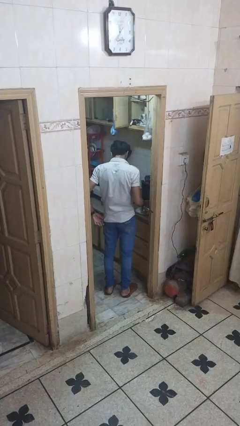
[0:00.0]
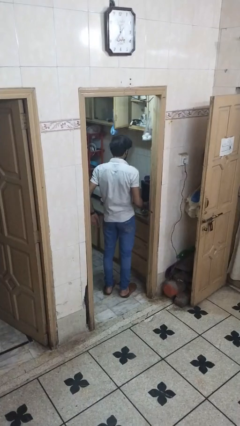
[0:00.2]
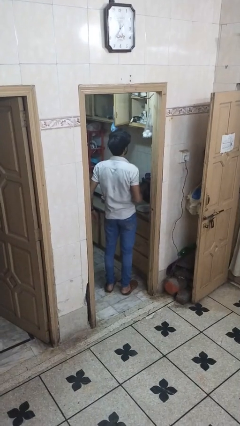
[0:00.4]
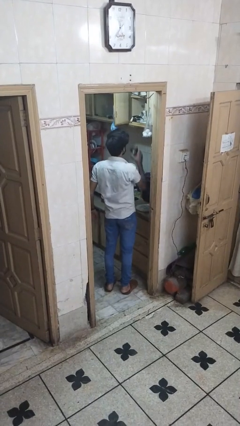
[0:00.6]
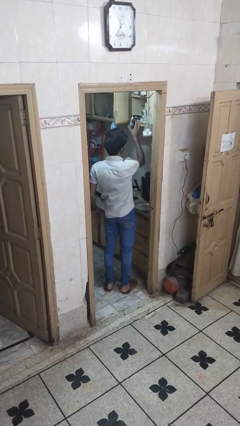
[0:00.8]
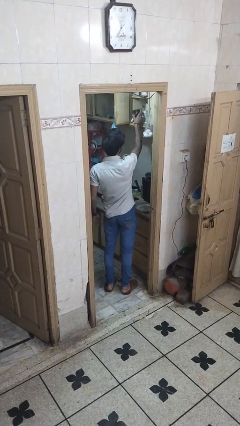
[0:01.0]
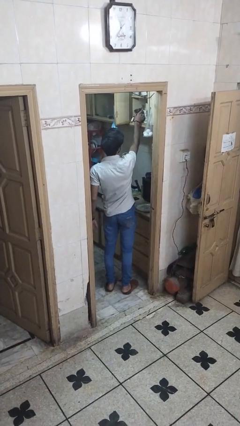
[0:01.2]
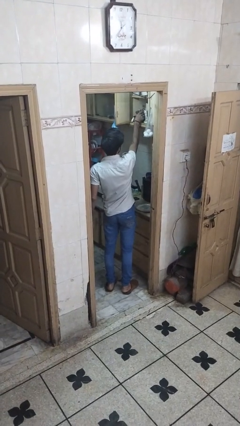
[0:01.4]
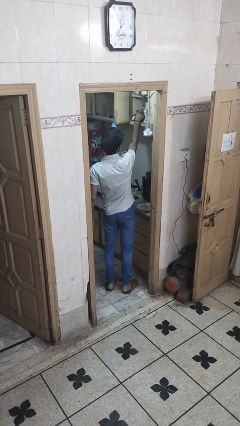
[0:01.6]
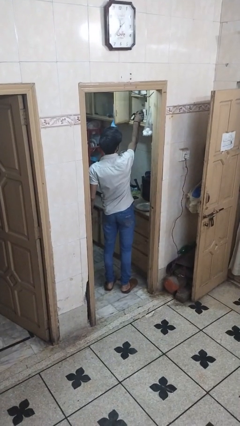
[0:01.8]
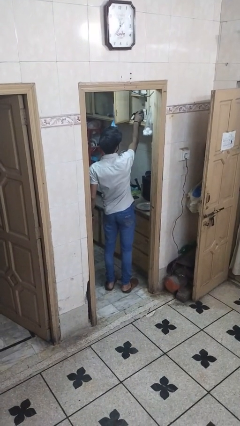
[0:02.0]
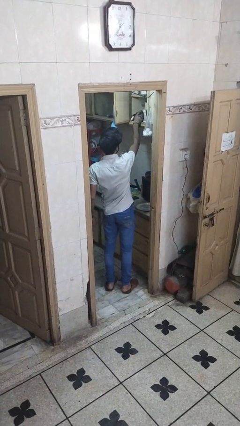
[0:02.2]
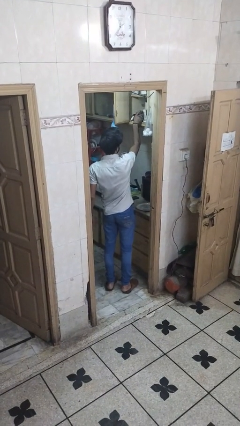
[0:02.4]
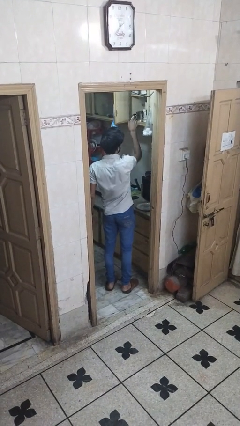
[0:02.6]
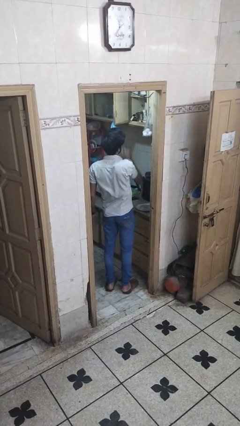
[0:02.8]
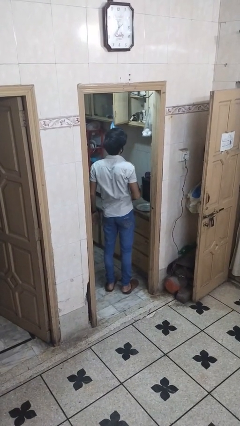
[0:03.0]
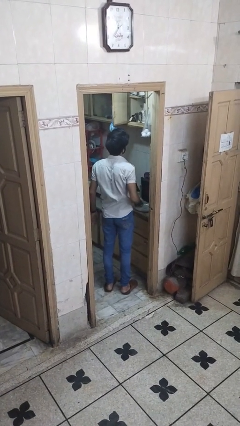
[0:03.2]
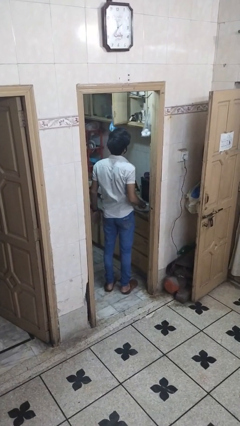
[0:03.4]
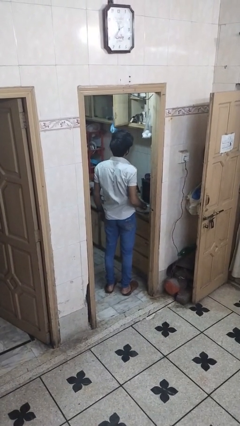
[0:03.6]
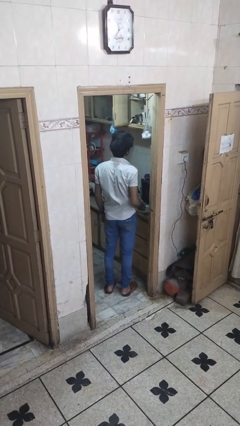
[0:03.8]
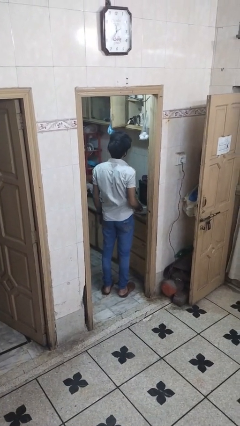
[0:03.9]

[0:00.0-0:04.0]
person puts object in cabinet

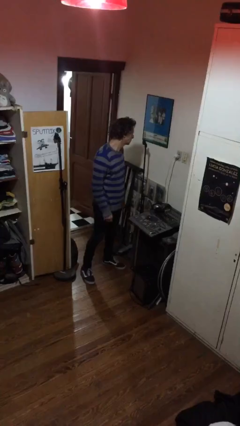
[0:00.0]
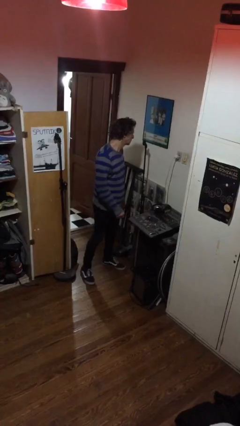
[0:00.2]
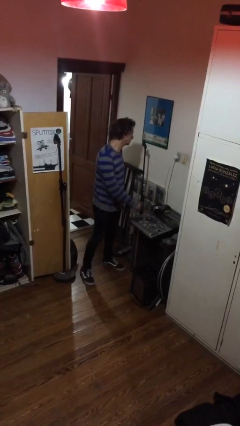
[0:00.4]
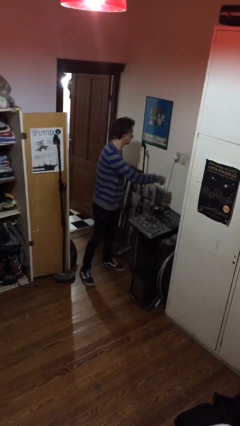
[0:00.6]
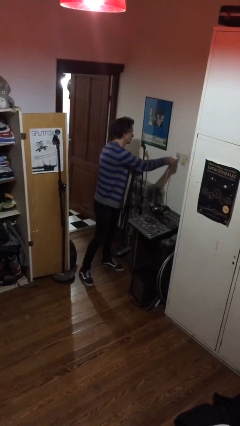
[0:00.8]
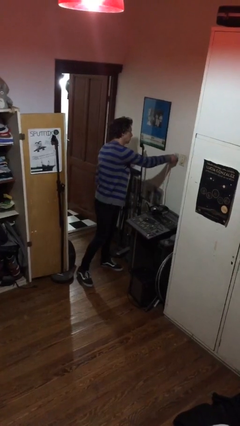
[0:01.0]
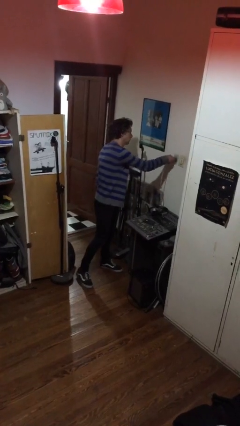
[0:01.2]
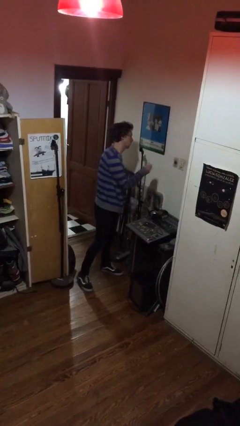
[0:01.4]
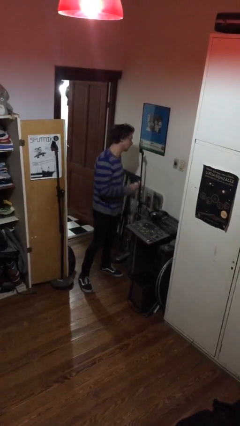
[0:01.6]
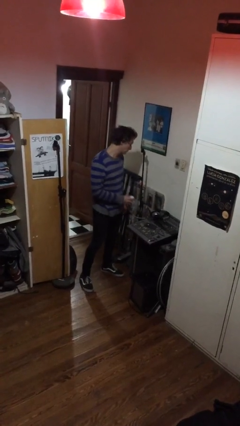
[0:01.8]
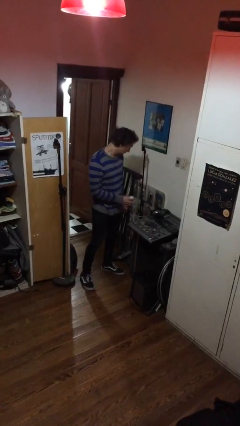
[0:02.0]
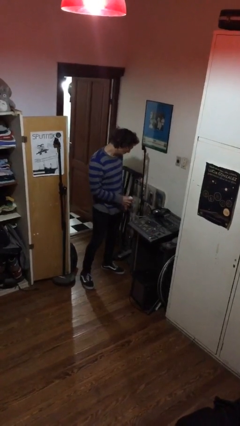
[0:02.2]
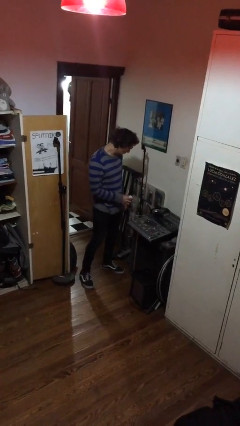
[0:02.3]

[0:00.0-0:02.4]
person unplugs from electrical socket

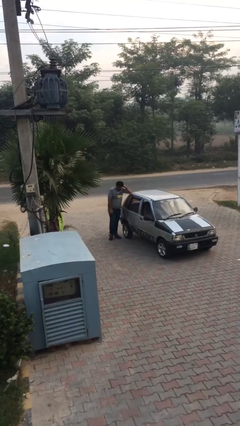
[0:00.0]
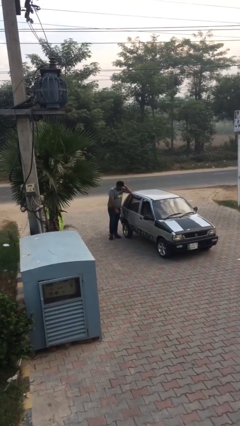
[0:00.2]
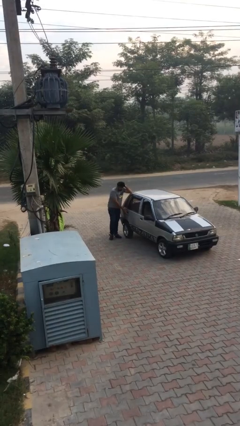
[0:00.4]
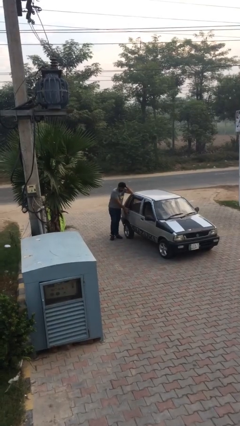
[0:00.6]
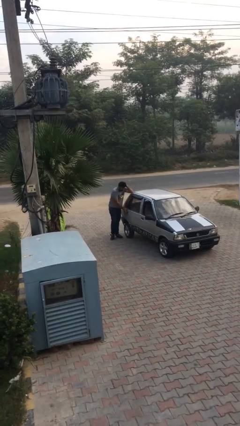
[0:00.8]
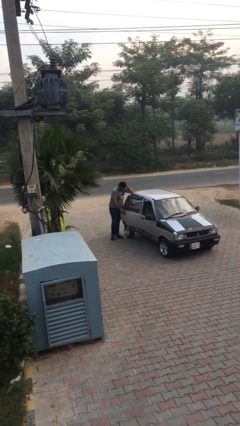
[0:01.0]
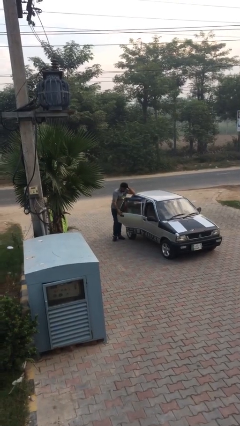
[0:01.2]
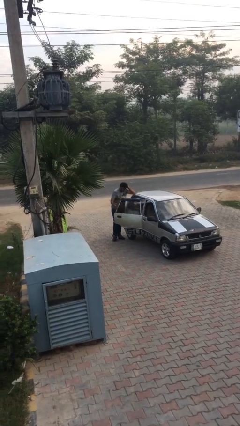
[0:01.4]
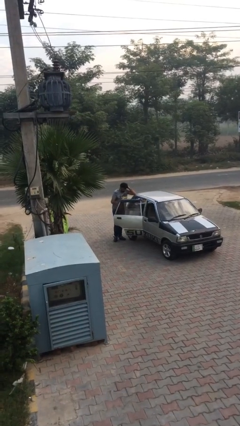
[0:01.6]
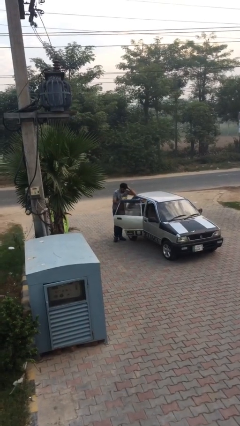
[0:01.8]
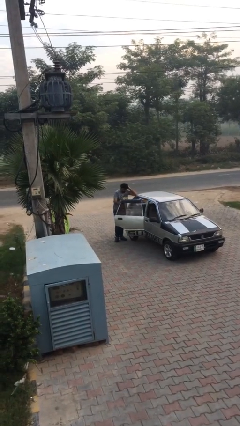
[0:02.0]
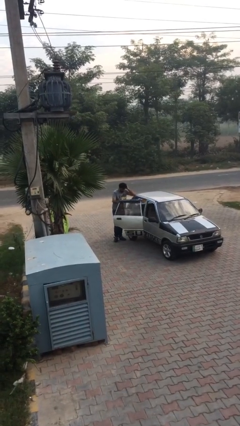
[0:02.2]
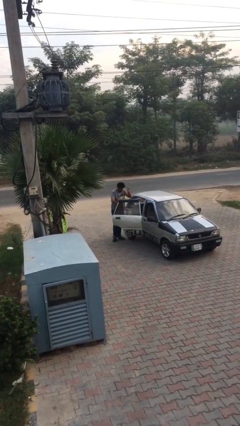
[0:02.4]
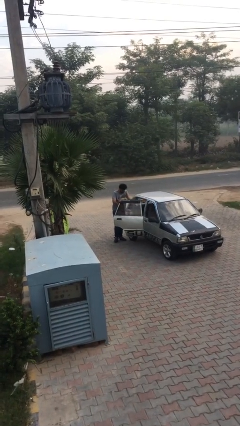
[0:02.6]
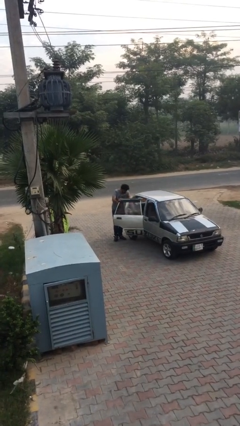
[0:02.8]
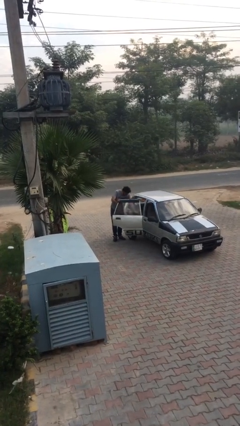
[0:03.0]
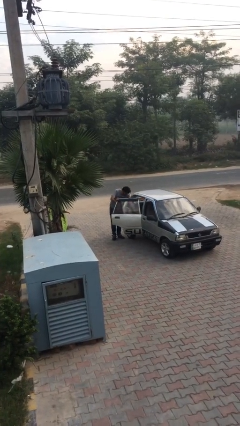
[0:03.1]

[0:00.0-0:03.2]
person opens car door

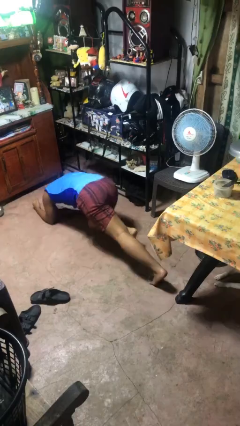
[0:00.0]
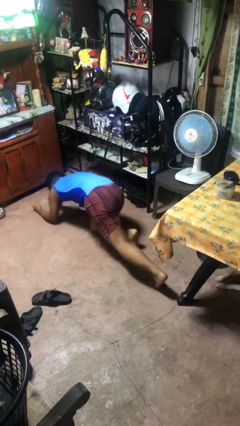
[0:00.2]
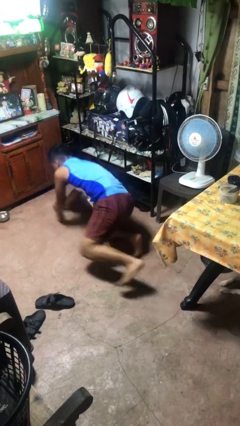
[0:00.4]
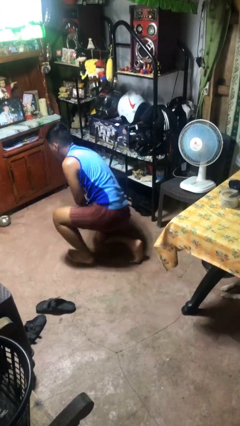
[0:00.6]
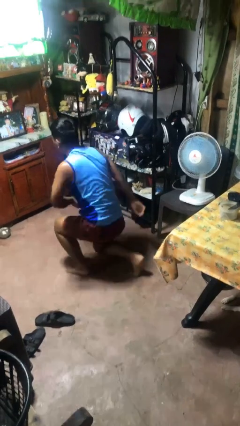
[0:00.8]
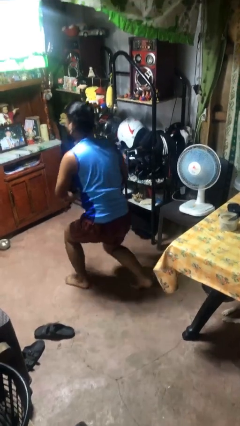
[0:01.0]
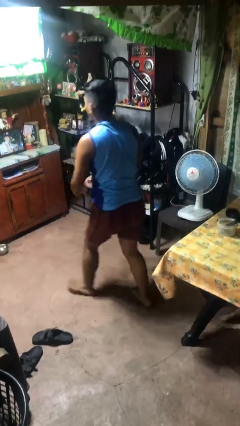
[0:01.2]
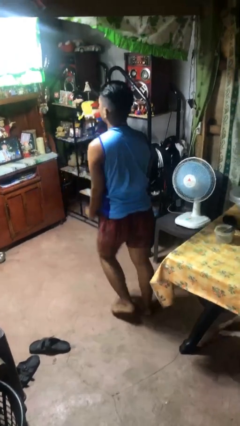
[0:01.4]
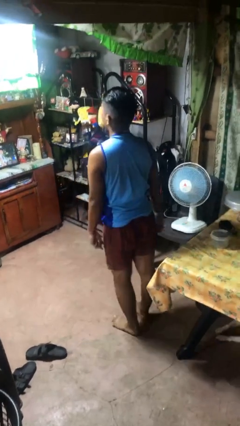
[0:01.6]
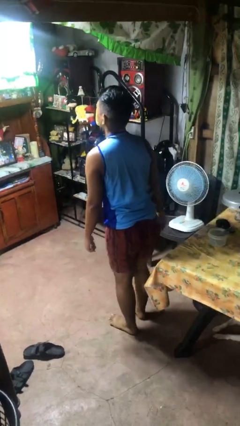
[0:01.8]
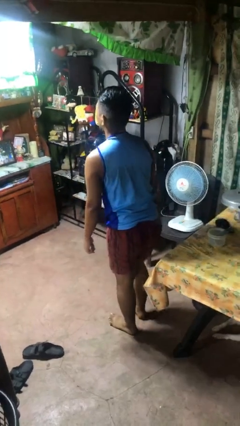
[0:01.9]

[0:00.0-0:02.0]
person stands up from floor

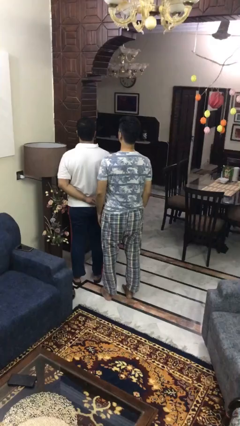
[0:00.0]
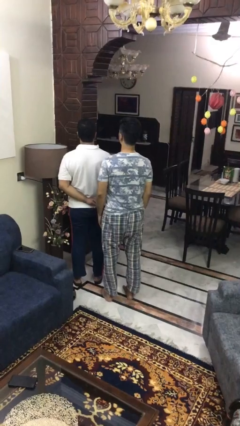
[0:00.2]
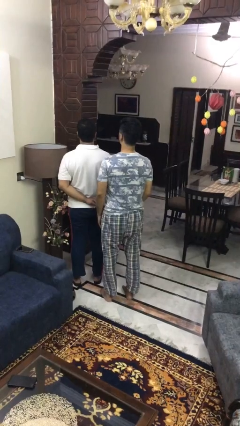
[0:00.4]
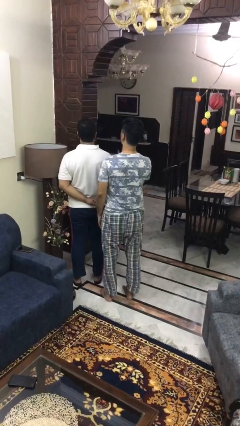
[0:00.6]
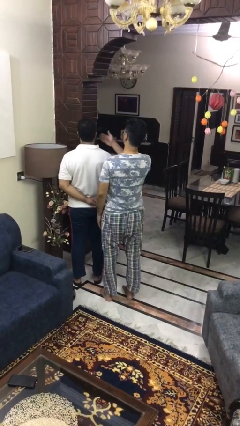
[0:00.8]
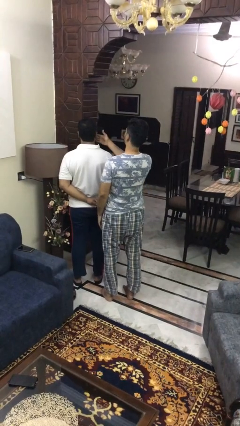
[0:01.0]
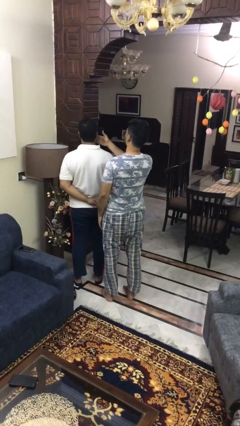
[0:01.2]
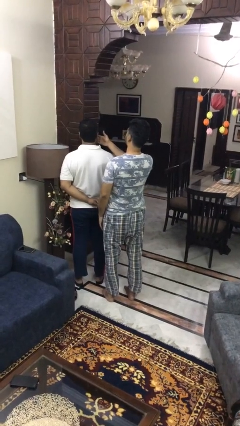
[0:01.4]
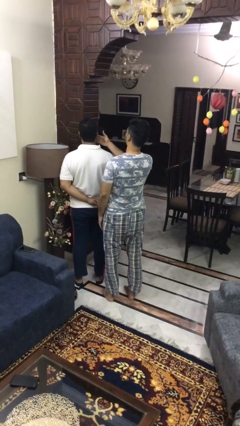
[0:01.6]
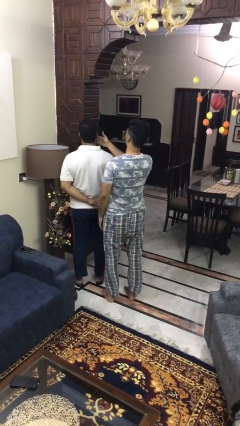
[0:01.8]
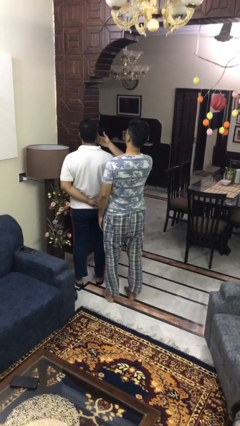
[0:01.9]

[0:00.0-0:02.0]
person touches face of person

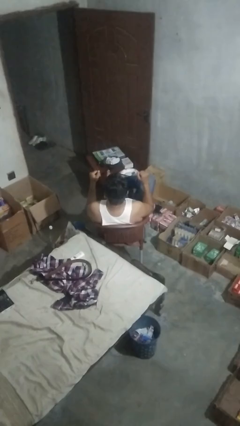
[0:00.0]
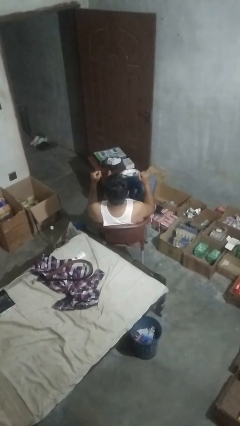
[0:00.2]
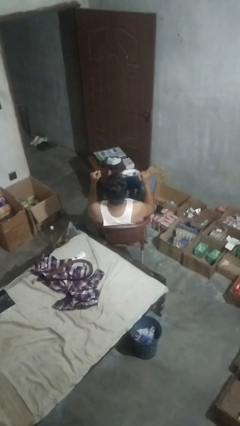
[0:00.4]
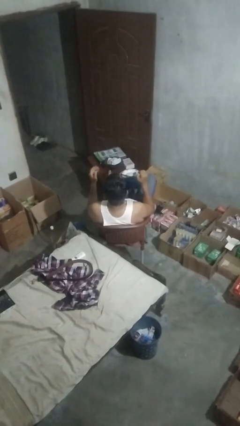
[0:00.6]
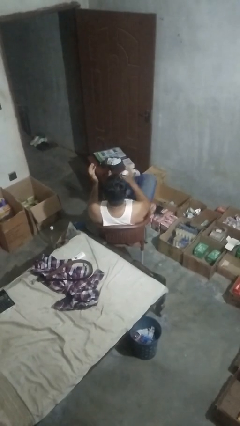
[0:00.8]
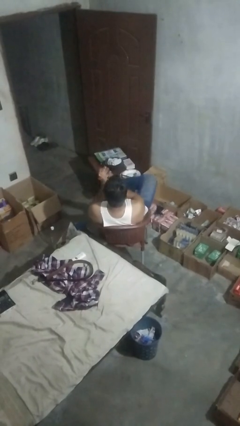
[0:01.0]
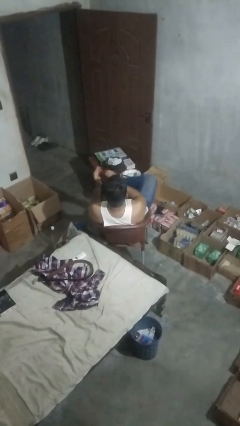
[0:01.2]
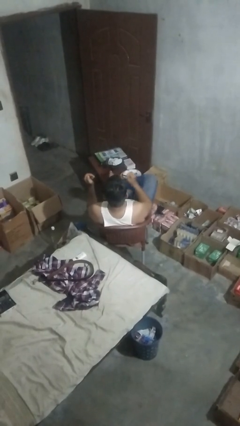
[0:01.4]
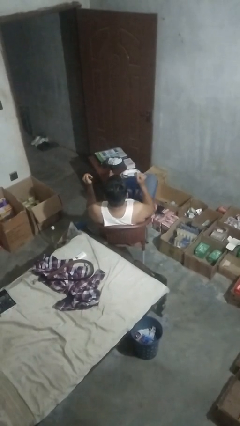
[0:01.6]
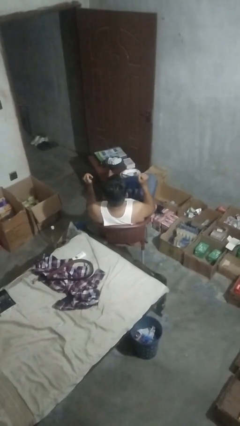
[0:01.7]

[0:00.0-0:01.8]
person claps hands

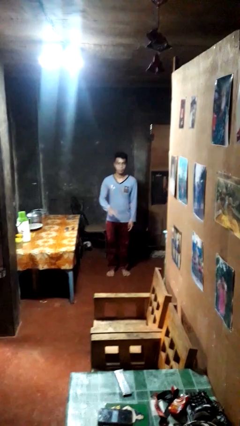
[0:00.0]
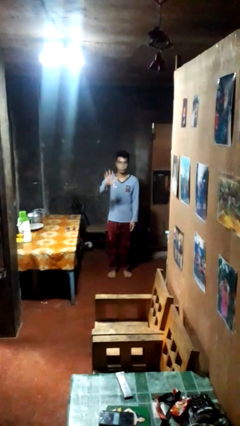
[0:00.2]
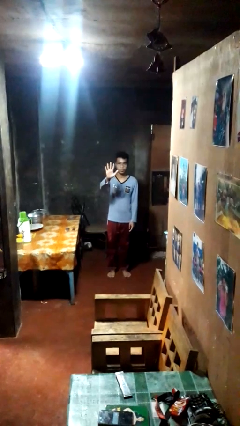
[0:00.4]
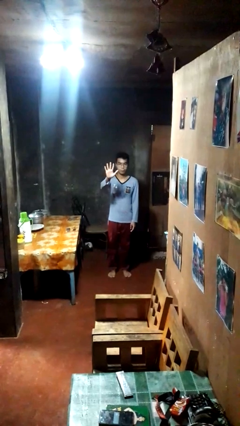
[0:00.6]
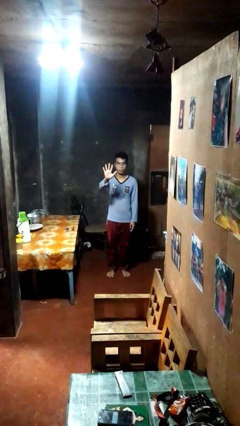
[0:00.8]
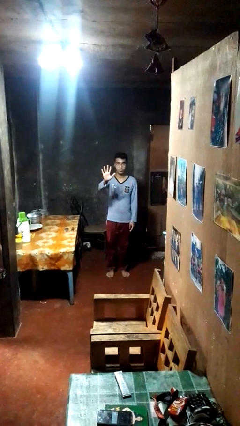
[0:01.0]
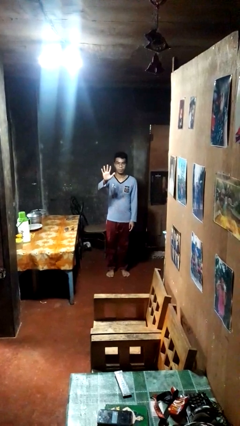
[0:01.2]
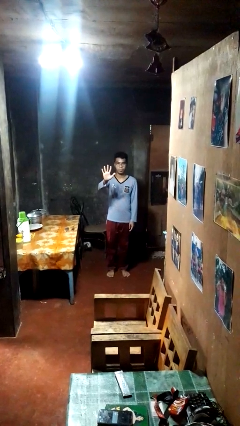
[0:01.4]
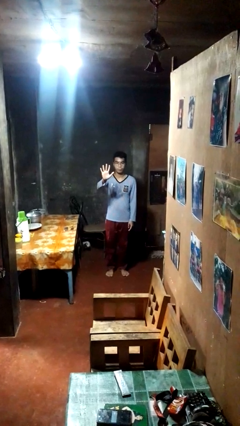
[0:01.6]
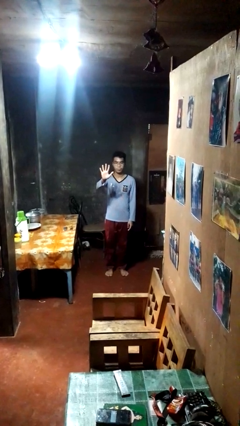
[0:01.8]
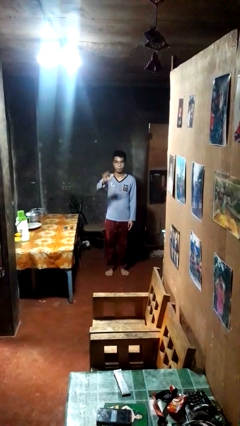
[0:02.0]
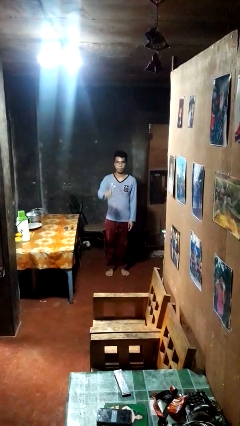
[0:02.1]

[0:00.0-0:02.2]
person gestures number five
